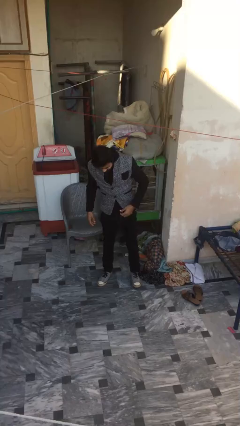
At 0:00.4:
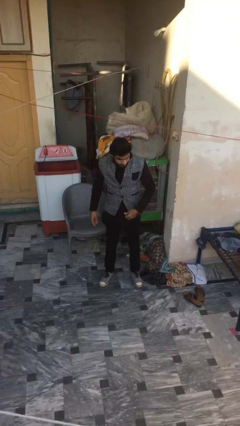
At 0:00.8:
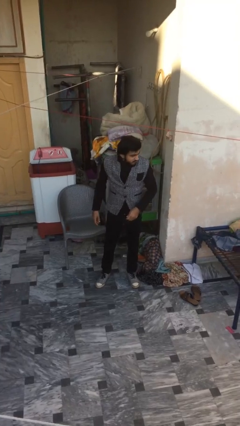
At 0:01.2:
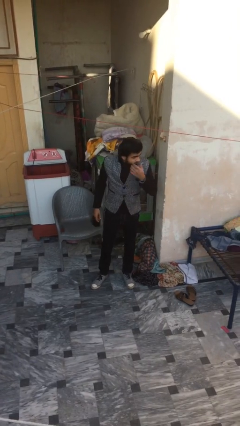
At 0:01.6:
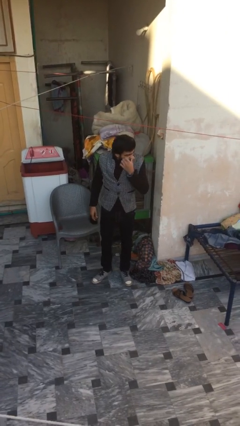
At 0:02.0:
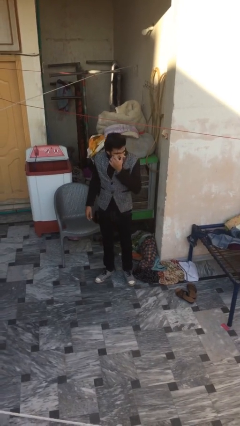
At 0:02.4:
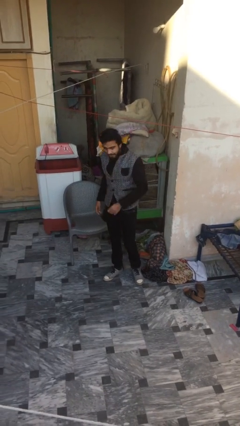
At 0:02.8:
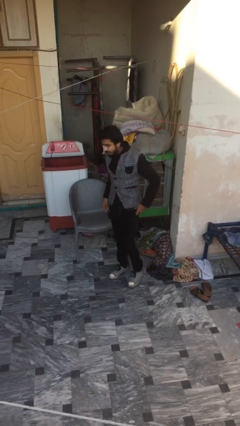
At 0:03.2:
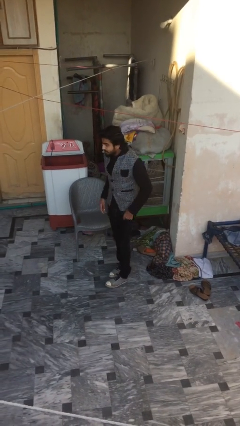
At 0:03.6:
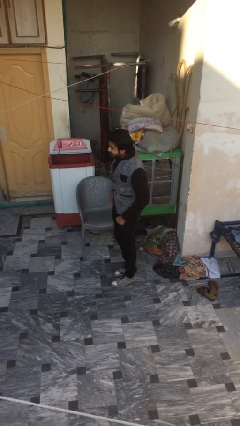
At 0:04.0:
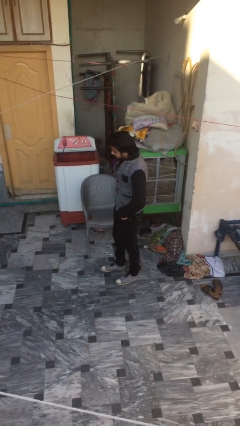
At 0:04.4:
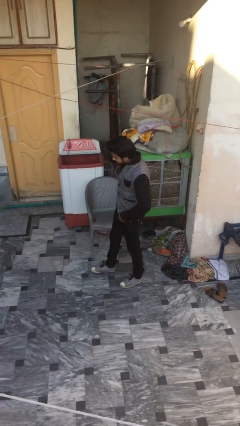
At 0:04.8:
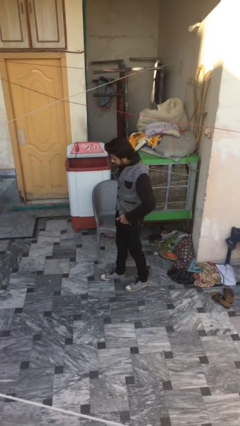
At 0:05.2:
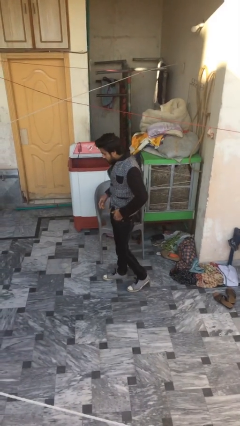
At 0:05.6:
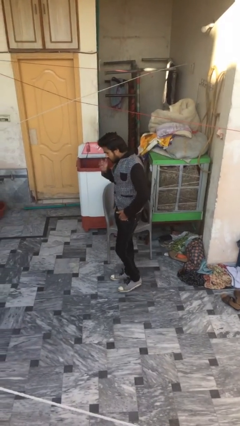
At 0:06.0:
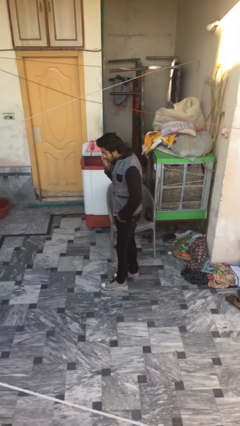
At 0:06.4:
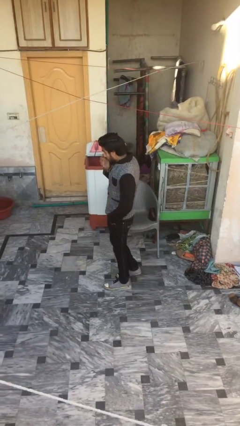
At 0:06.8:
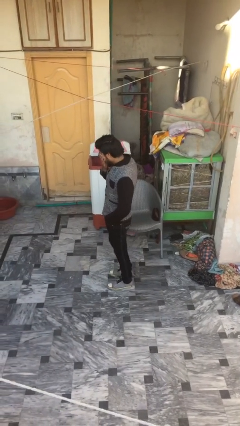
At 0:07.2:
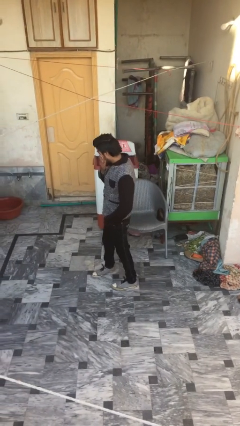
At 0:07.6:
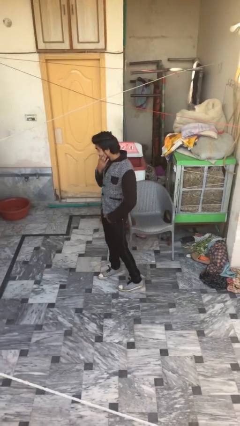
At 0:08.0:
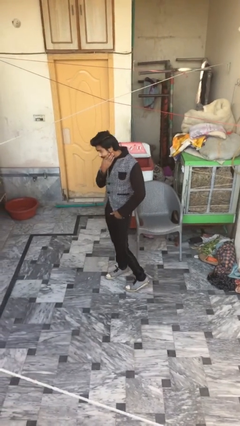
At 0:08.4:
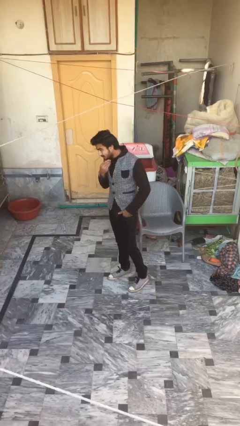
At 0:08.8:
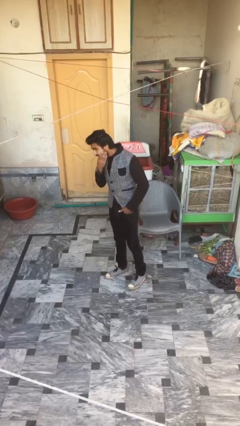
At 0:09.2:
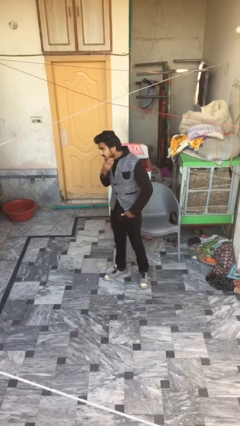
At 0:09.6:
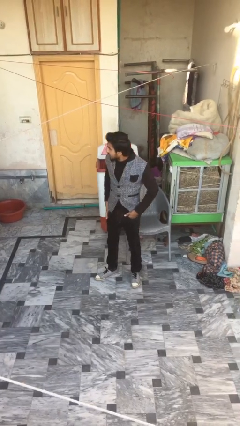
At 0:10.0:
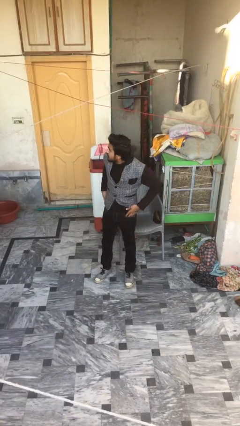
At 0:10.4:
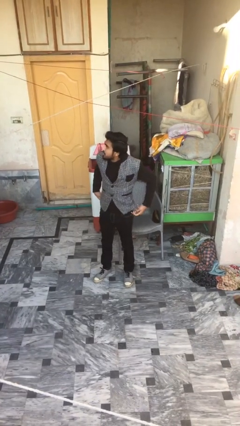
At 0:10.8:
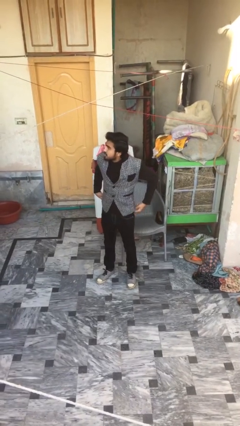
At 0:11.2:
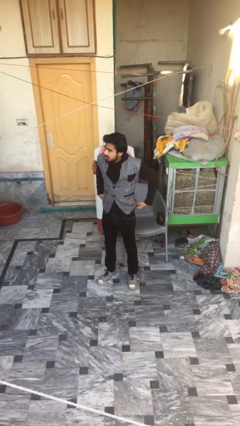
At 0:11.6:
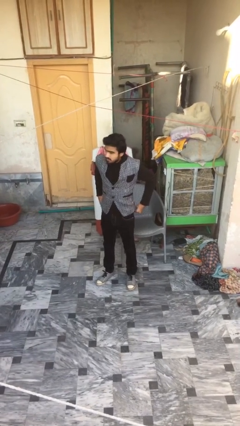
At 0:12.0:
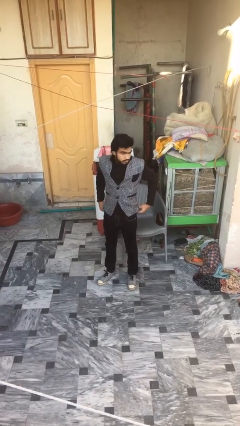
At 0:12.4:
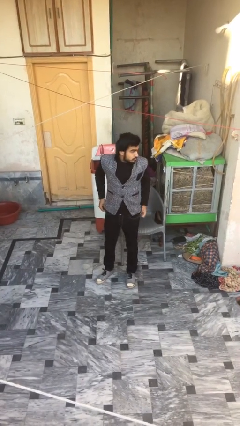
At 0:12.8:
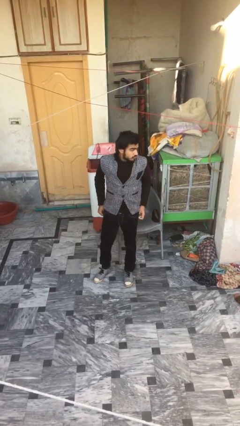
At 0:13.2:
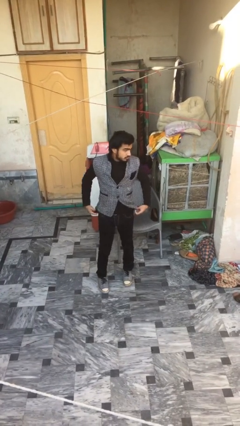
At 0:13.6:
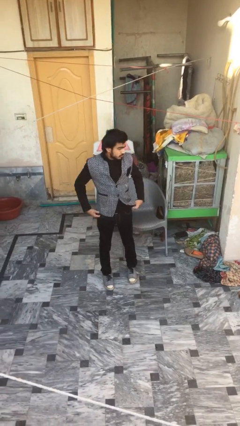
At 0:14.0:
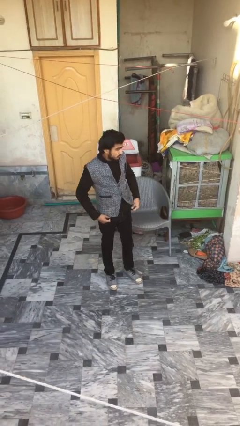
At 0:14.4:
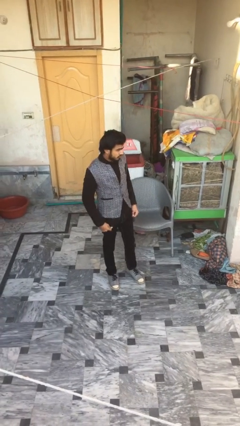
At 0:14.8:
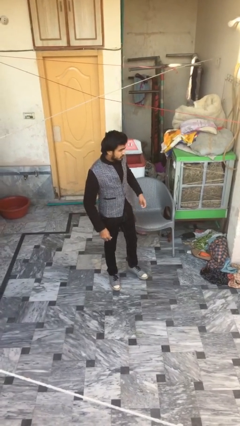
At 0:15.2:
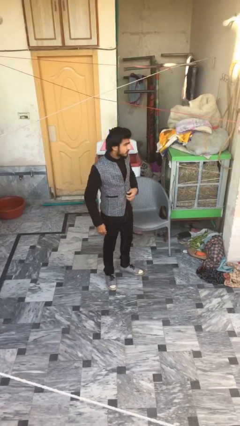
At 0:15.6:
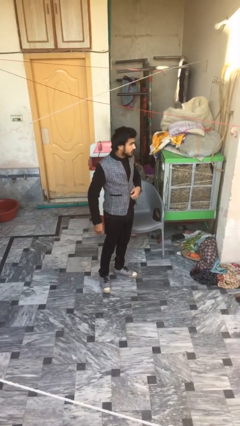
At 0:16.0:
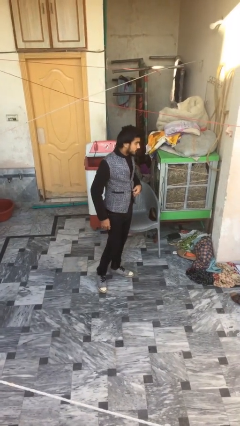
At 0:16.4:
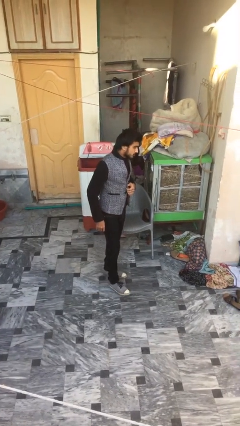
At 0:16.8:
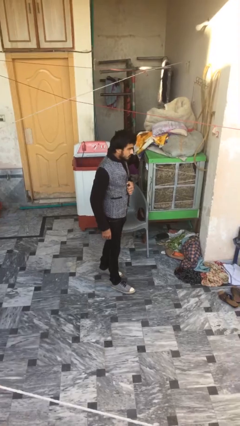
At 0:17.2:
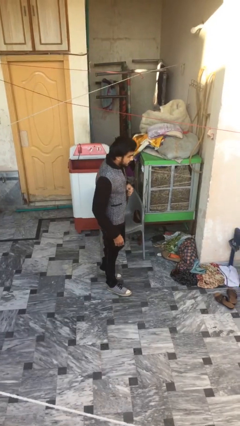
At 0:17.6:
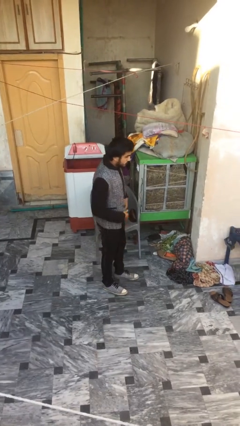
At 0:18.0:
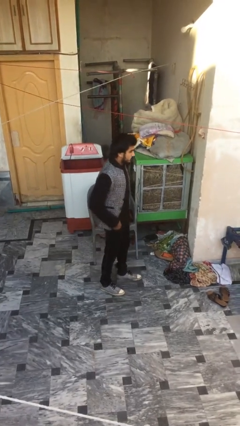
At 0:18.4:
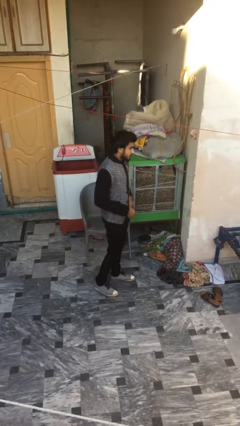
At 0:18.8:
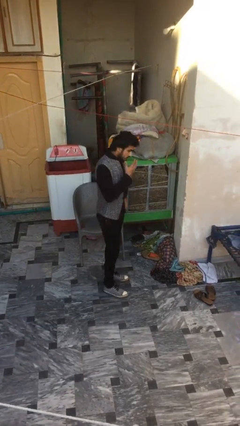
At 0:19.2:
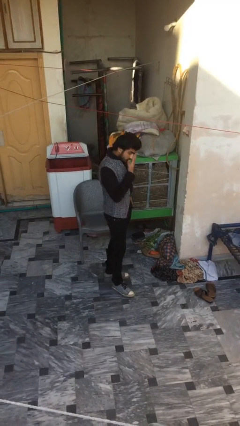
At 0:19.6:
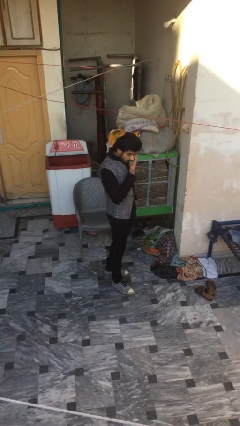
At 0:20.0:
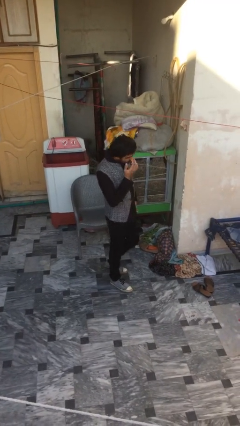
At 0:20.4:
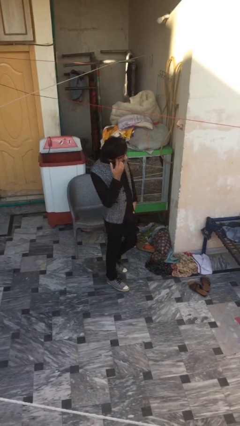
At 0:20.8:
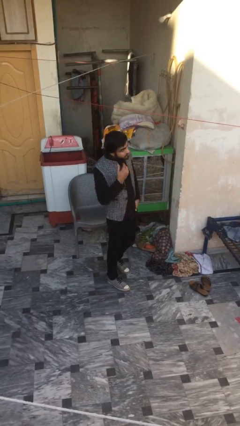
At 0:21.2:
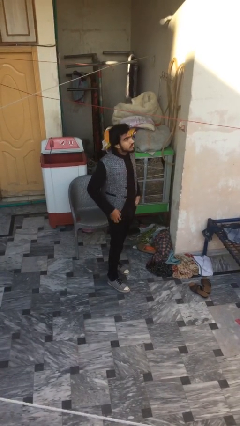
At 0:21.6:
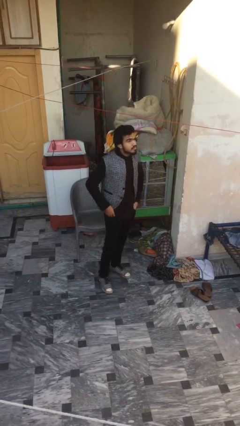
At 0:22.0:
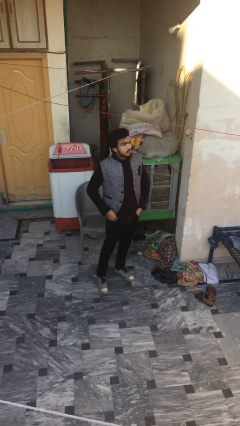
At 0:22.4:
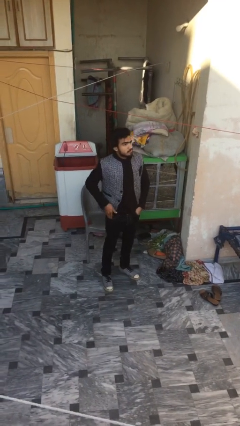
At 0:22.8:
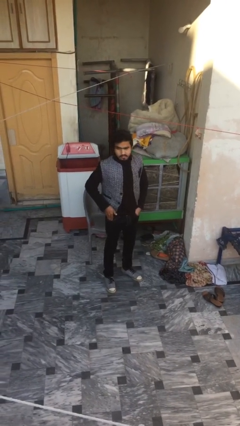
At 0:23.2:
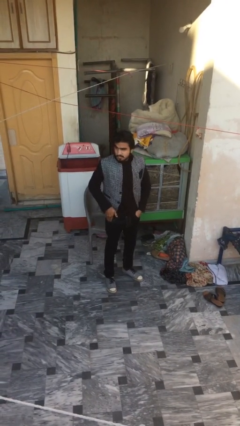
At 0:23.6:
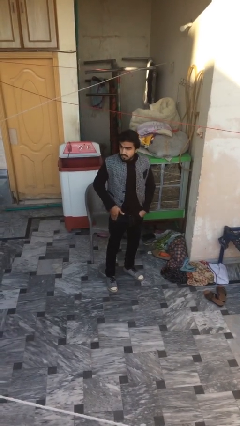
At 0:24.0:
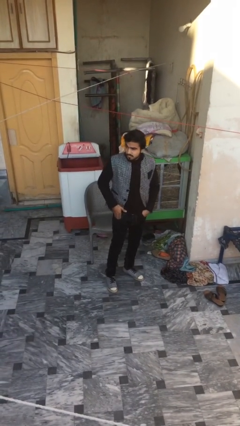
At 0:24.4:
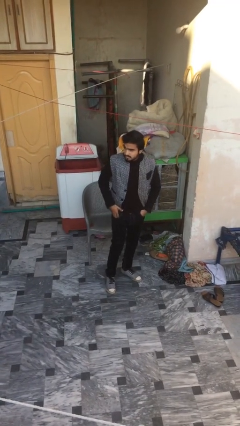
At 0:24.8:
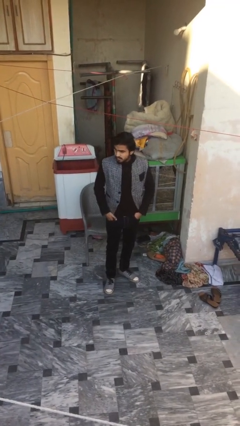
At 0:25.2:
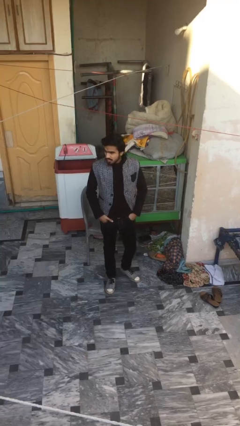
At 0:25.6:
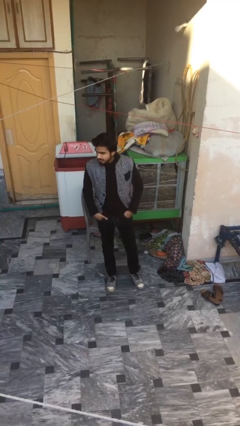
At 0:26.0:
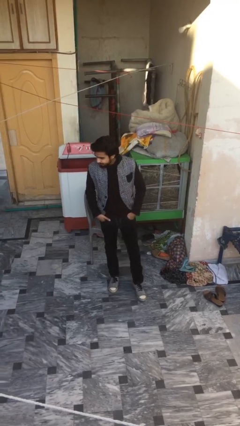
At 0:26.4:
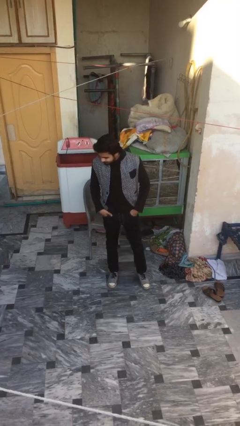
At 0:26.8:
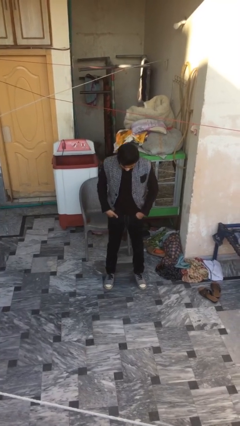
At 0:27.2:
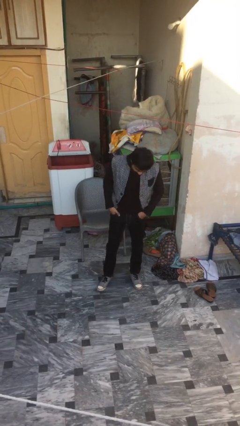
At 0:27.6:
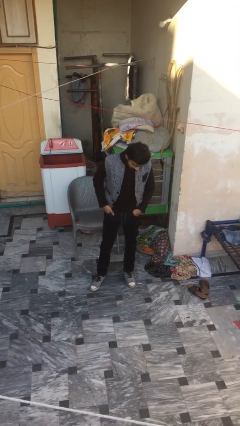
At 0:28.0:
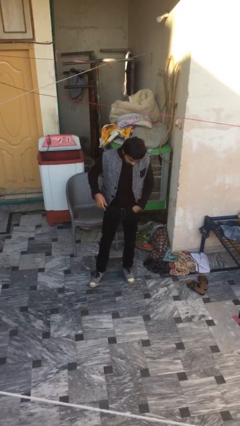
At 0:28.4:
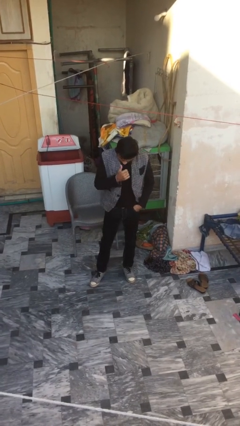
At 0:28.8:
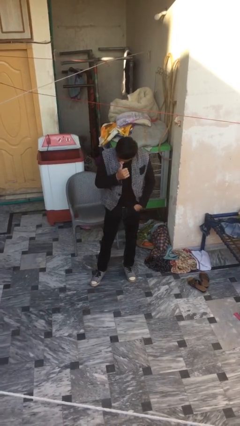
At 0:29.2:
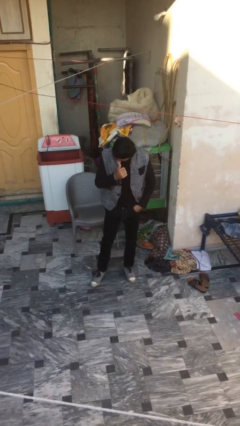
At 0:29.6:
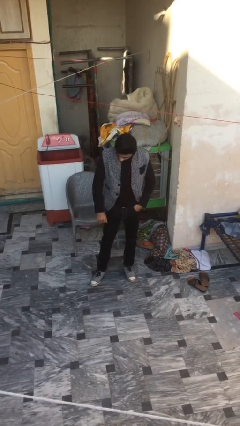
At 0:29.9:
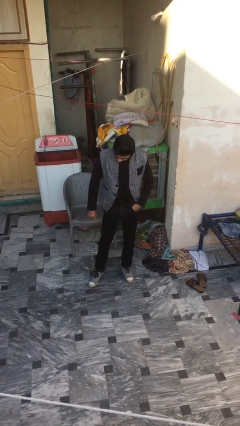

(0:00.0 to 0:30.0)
person walks

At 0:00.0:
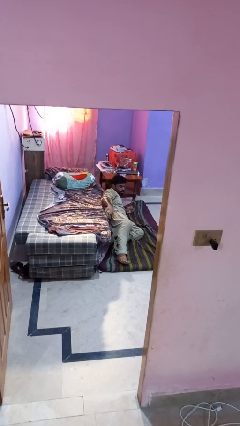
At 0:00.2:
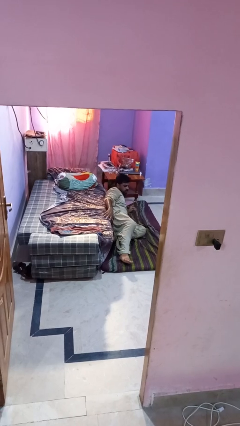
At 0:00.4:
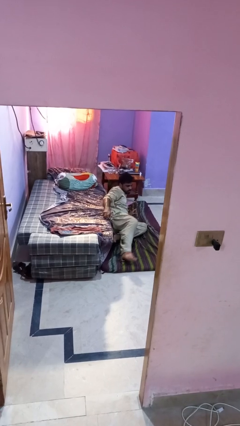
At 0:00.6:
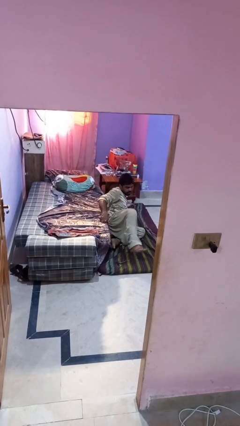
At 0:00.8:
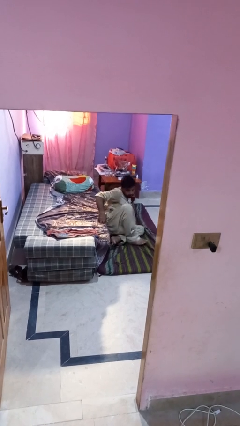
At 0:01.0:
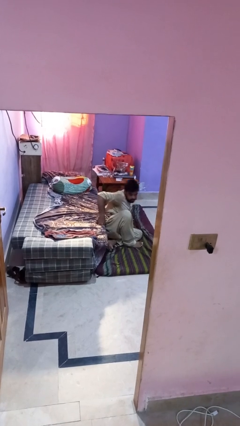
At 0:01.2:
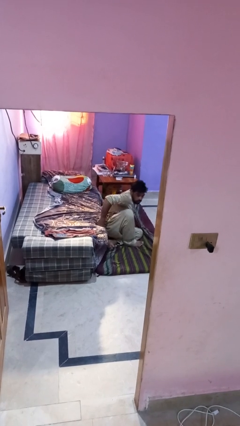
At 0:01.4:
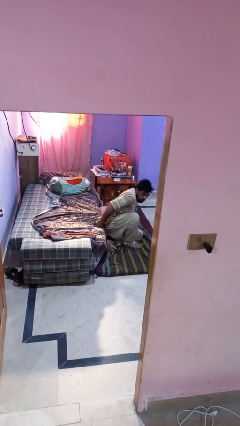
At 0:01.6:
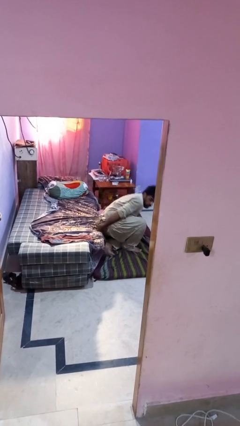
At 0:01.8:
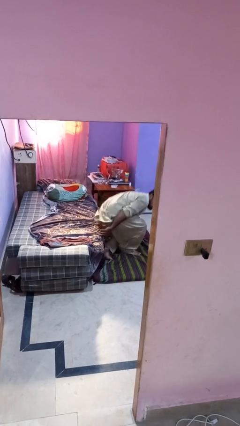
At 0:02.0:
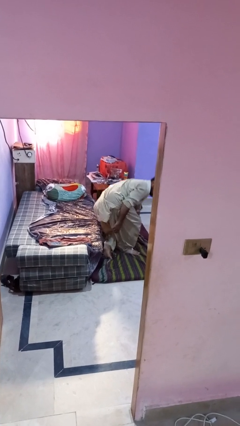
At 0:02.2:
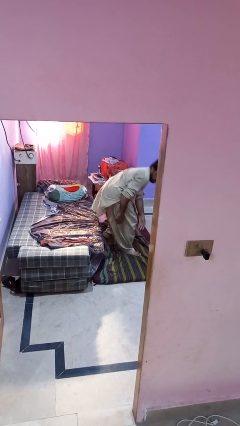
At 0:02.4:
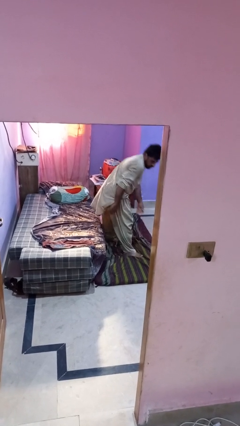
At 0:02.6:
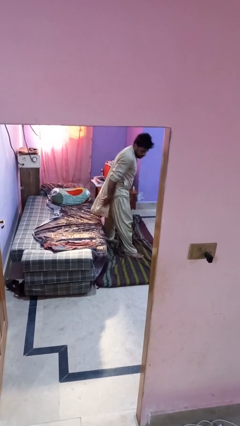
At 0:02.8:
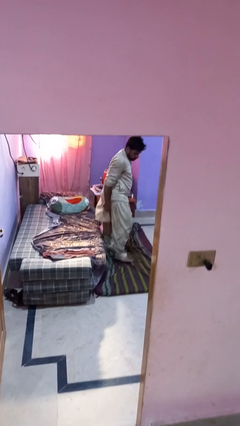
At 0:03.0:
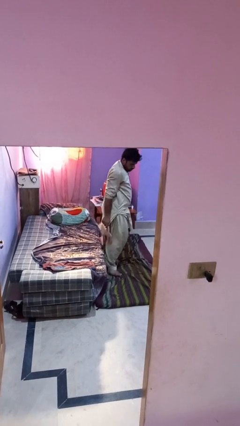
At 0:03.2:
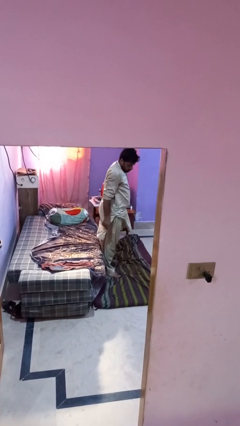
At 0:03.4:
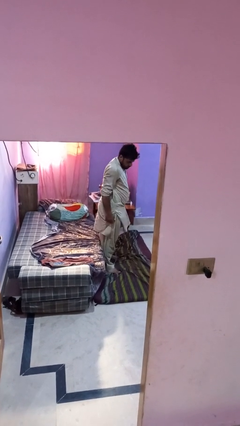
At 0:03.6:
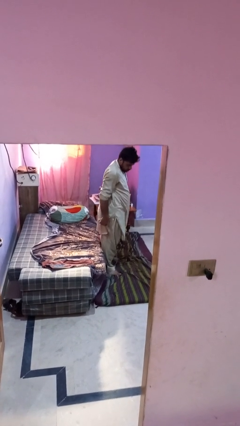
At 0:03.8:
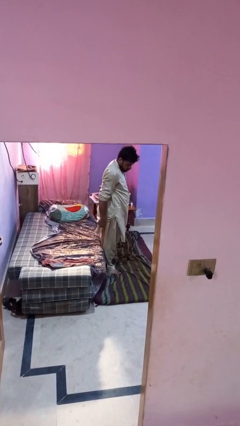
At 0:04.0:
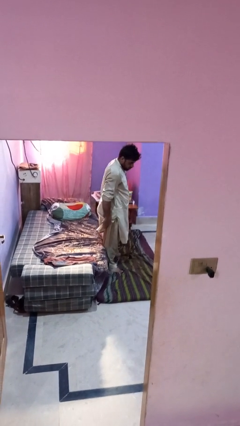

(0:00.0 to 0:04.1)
person stands up from floor
